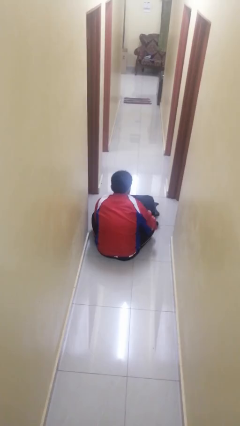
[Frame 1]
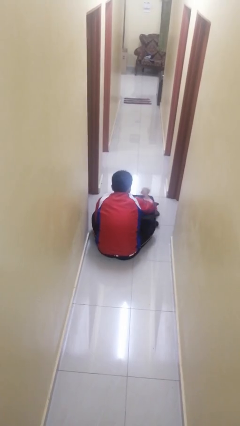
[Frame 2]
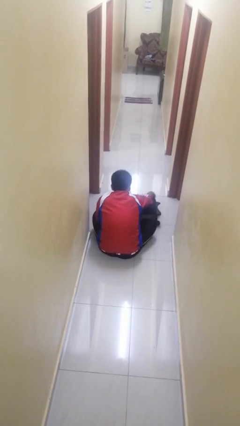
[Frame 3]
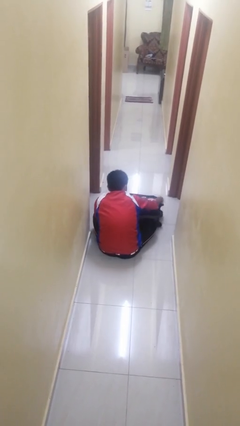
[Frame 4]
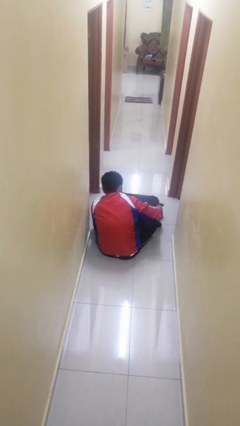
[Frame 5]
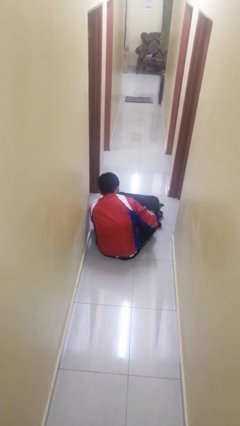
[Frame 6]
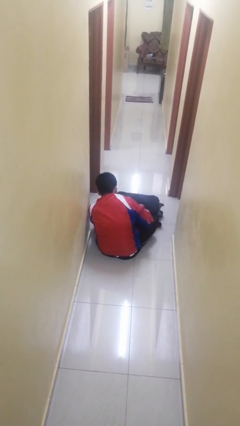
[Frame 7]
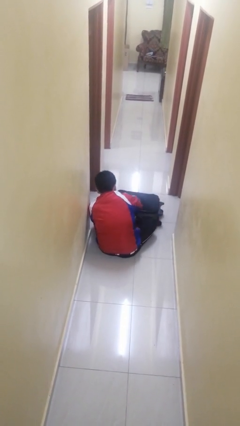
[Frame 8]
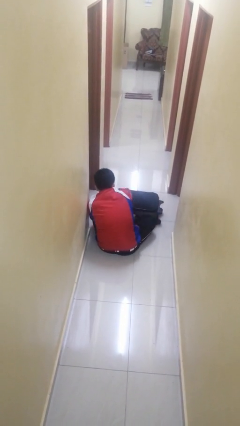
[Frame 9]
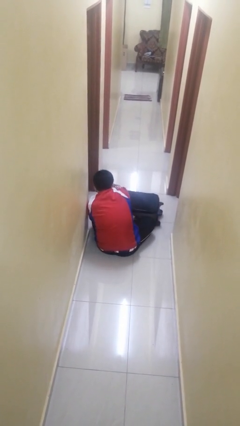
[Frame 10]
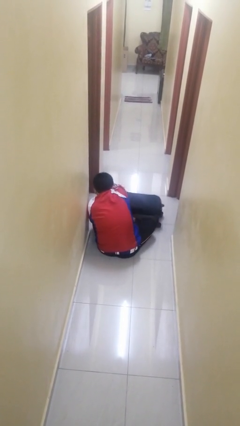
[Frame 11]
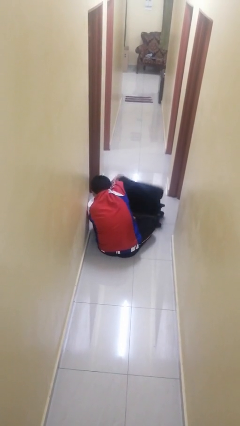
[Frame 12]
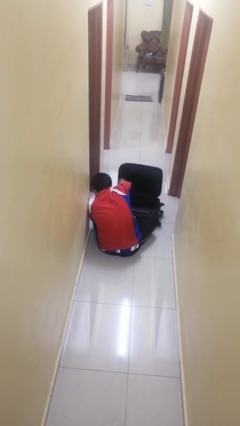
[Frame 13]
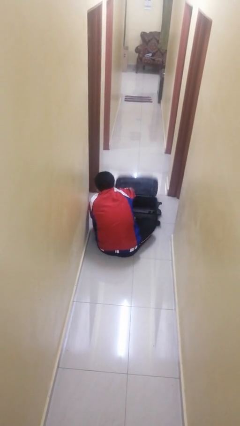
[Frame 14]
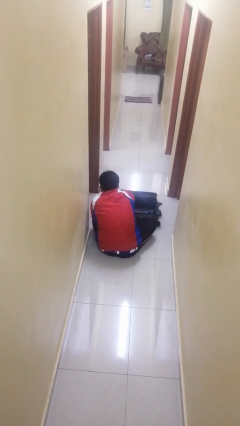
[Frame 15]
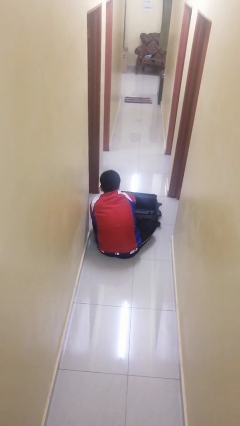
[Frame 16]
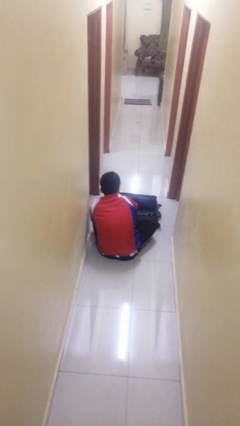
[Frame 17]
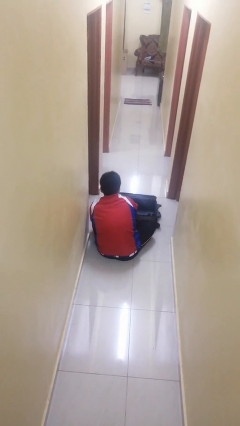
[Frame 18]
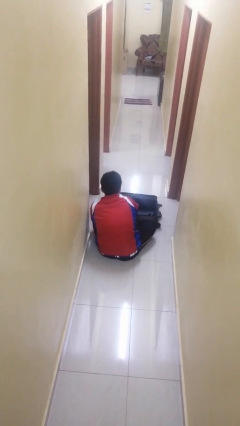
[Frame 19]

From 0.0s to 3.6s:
person opens suitcase

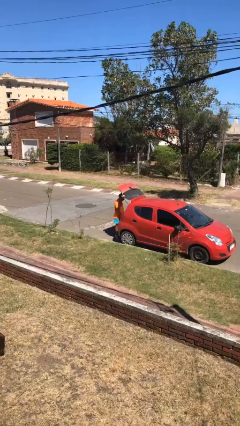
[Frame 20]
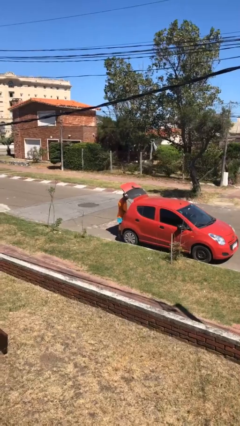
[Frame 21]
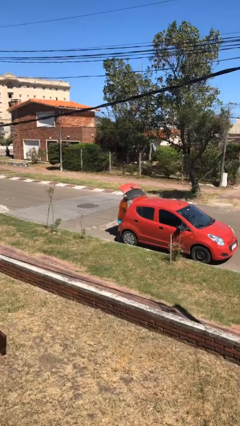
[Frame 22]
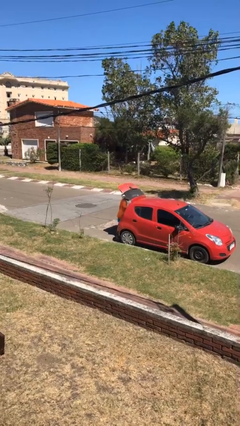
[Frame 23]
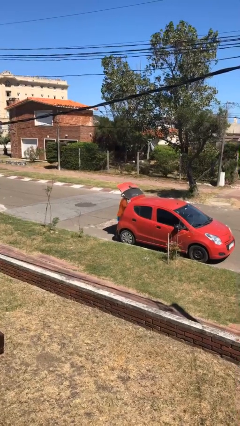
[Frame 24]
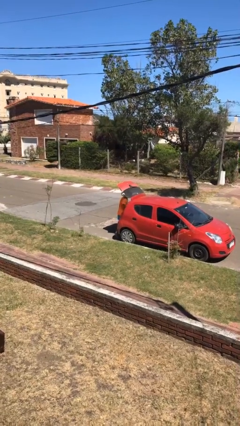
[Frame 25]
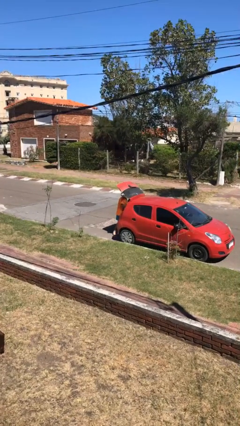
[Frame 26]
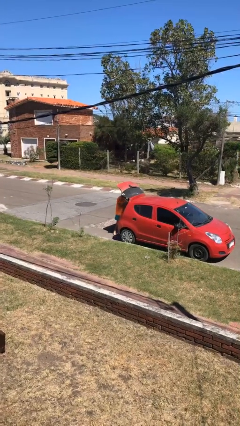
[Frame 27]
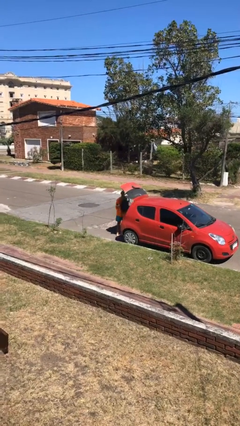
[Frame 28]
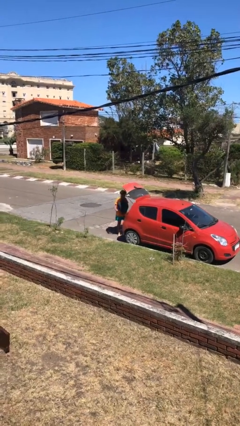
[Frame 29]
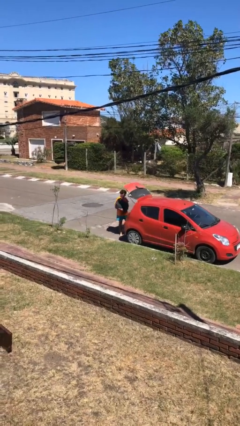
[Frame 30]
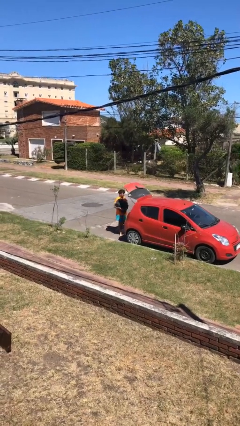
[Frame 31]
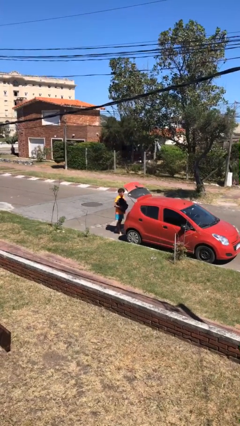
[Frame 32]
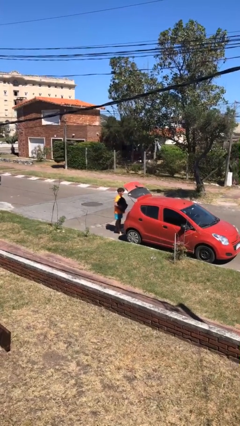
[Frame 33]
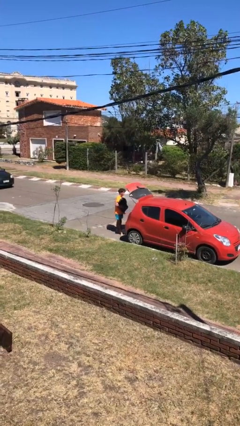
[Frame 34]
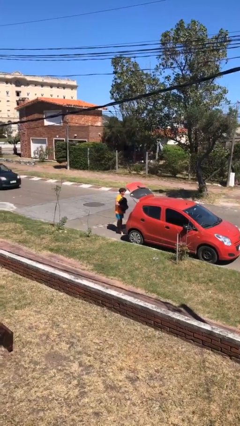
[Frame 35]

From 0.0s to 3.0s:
person unloads car

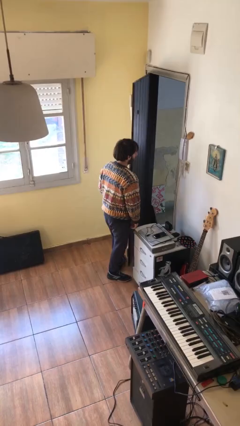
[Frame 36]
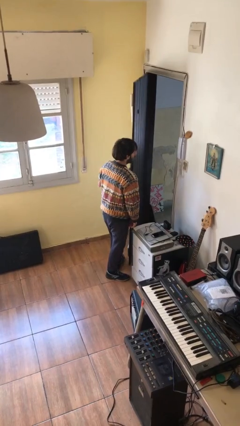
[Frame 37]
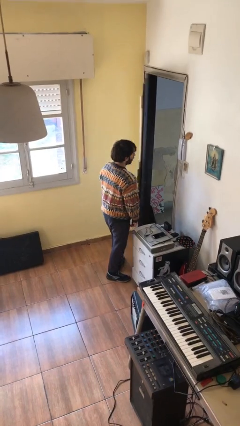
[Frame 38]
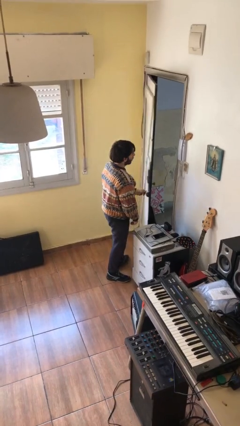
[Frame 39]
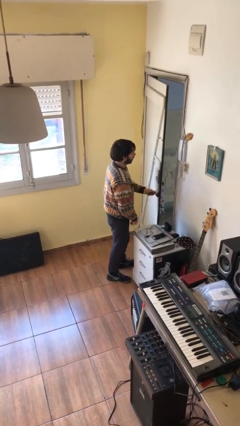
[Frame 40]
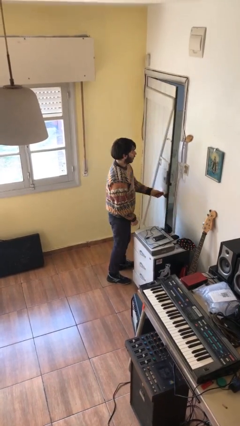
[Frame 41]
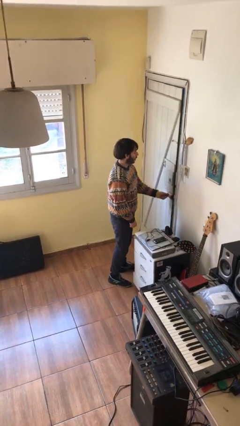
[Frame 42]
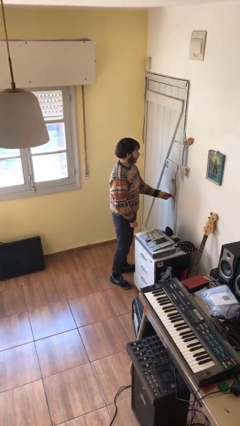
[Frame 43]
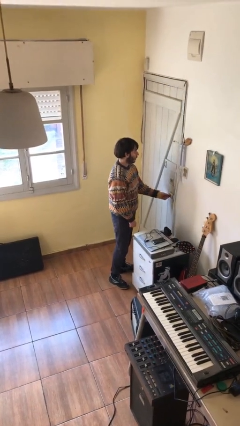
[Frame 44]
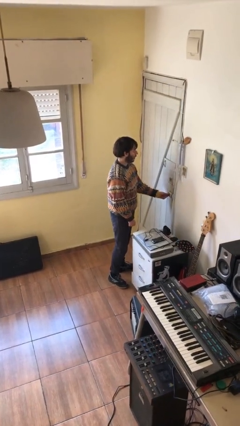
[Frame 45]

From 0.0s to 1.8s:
person closes facility door

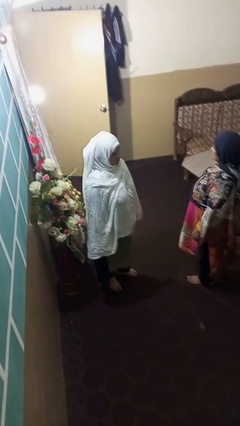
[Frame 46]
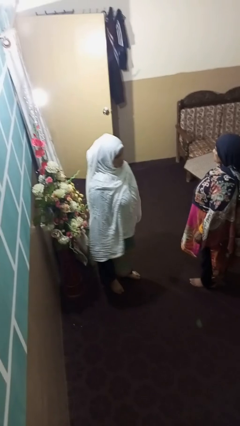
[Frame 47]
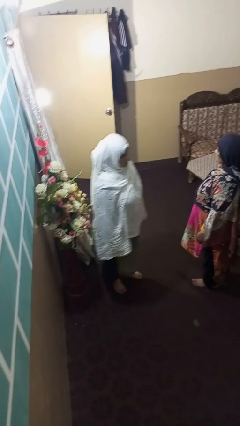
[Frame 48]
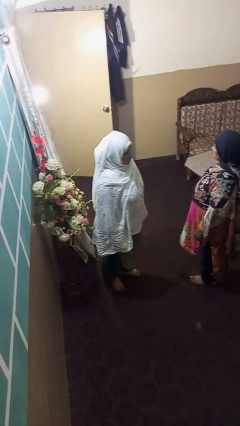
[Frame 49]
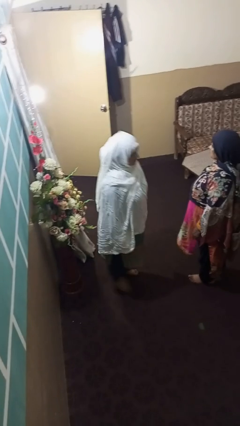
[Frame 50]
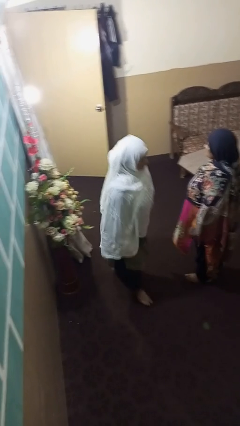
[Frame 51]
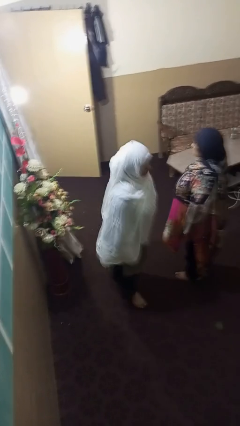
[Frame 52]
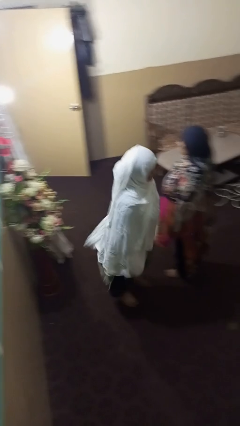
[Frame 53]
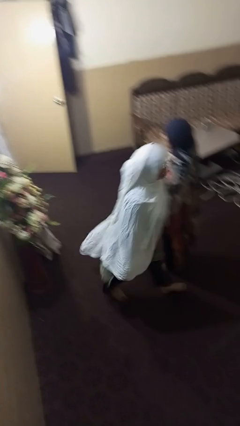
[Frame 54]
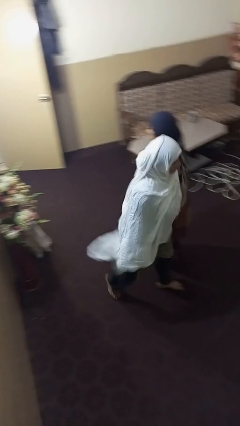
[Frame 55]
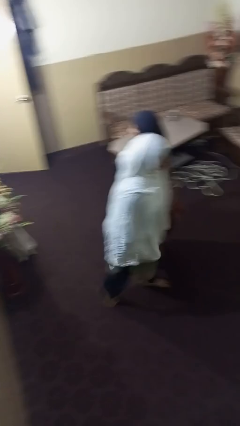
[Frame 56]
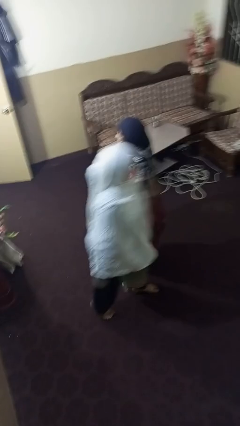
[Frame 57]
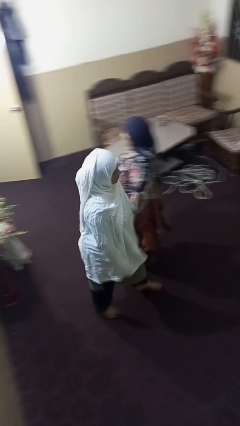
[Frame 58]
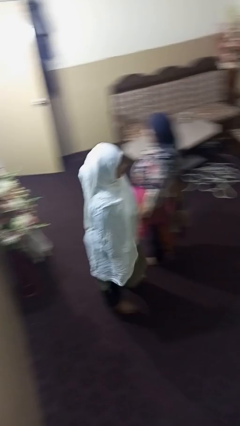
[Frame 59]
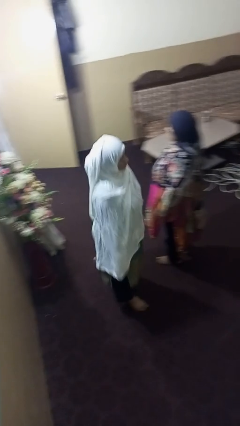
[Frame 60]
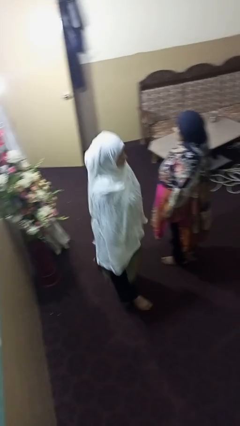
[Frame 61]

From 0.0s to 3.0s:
person shoves person

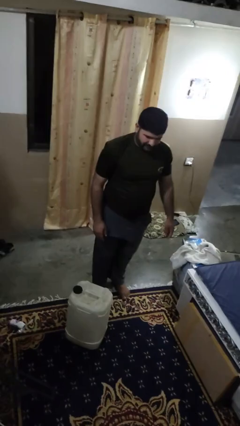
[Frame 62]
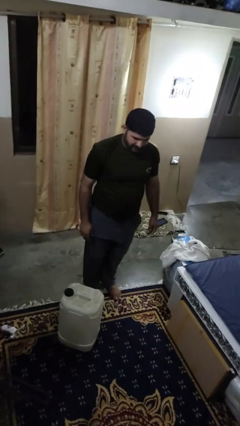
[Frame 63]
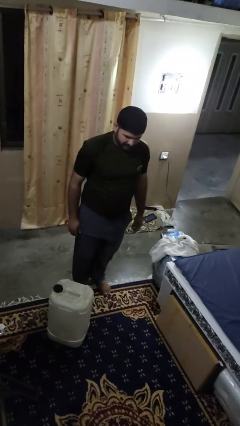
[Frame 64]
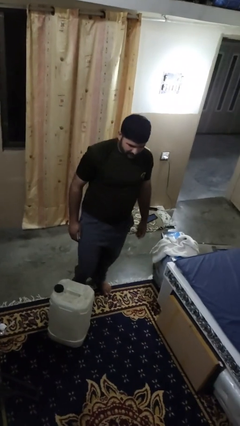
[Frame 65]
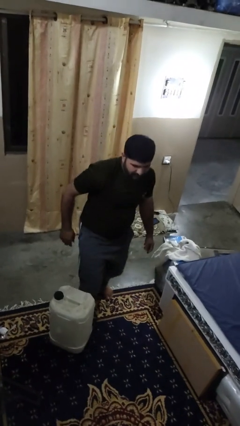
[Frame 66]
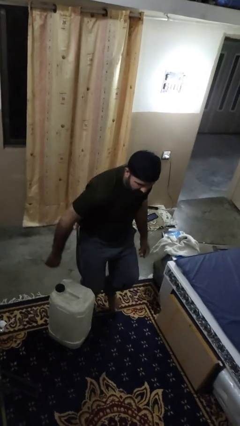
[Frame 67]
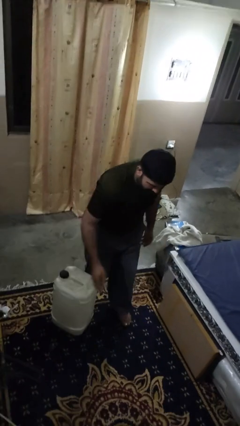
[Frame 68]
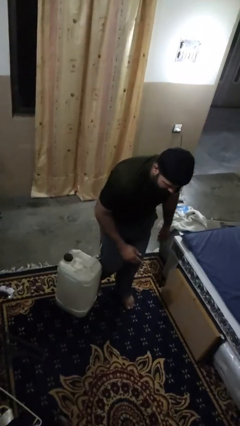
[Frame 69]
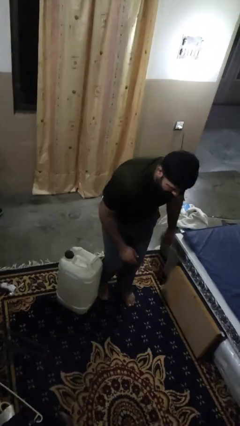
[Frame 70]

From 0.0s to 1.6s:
person trips on object on floor

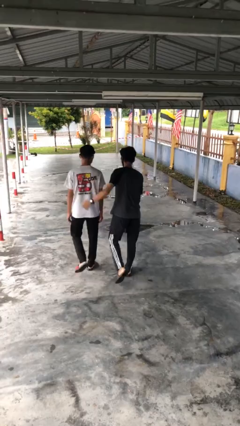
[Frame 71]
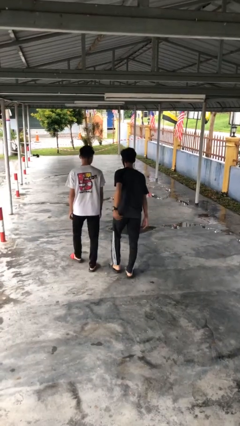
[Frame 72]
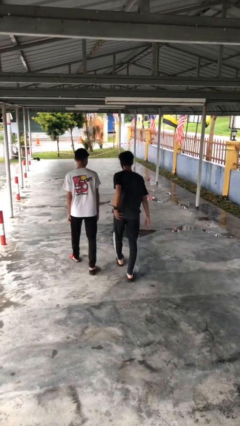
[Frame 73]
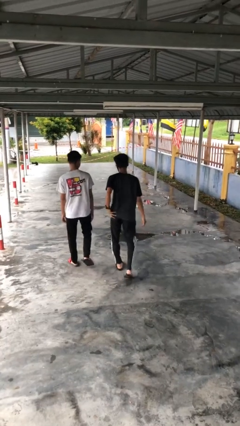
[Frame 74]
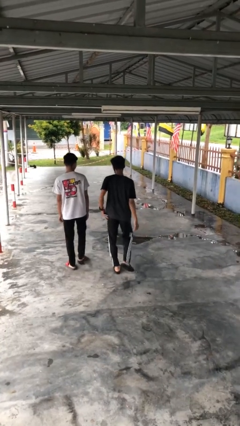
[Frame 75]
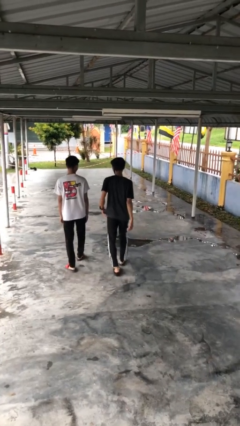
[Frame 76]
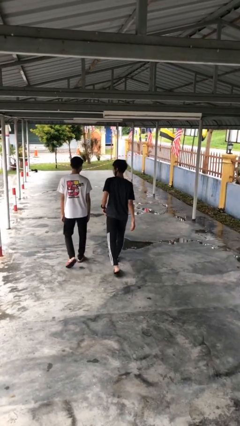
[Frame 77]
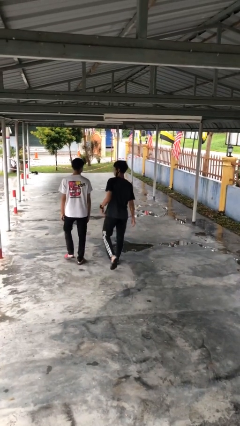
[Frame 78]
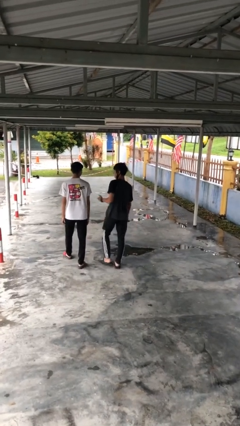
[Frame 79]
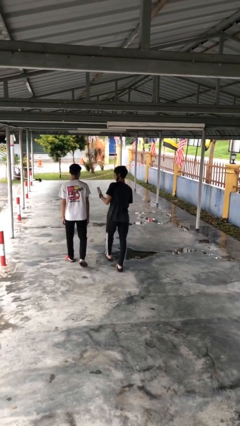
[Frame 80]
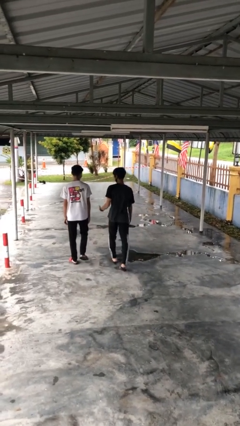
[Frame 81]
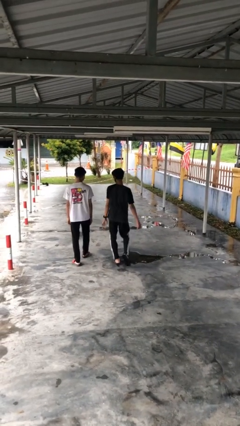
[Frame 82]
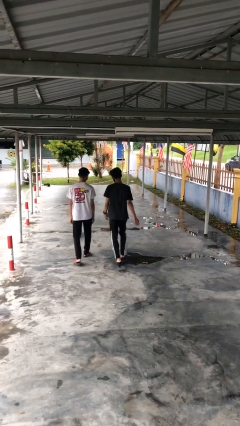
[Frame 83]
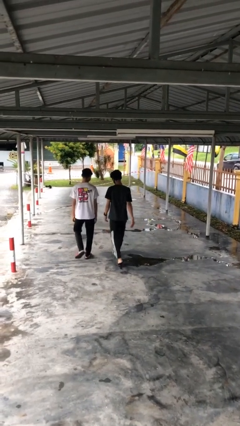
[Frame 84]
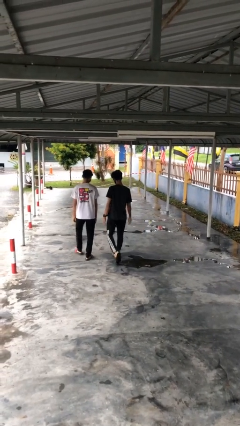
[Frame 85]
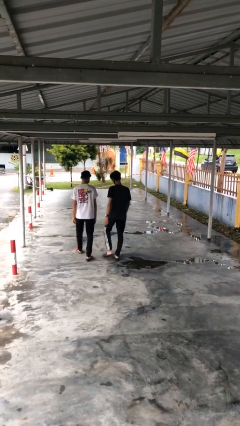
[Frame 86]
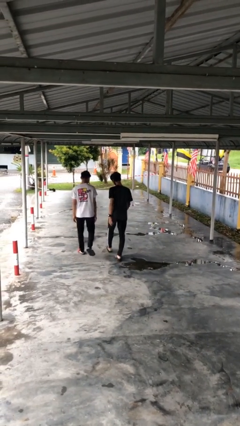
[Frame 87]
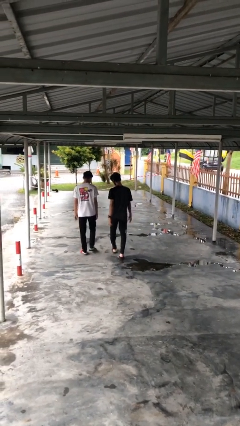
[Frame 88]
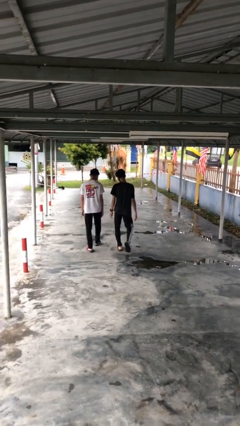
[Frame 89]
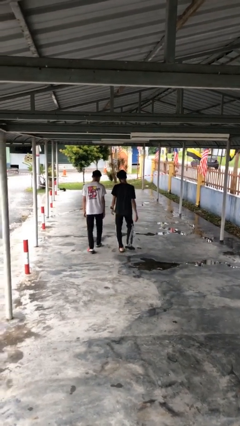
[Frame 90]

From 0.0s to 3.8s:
person talks to person

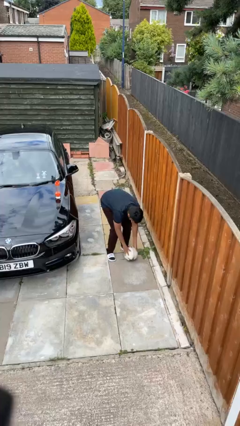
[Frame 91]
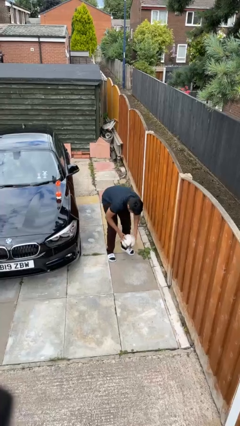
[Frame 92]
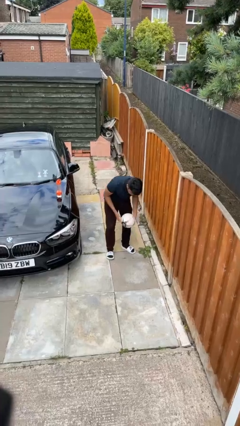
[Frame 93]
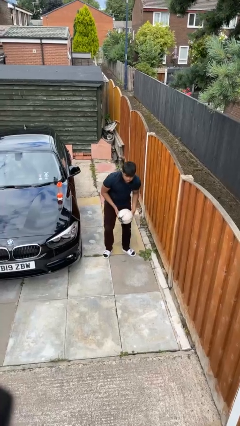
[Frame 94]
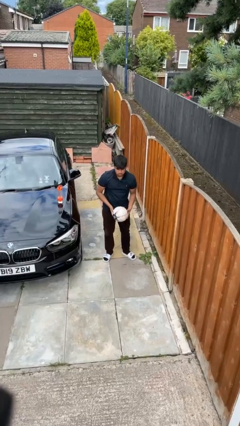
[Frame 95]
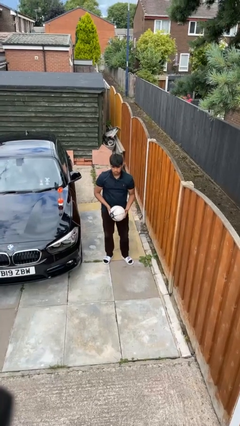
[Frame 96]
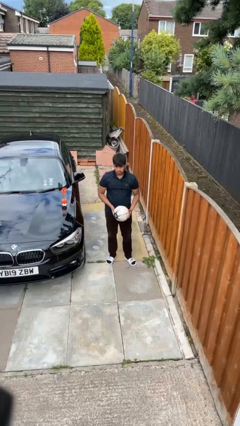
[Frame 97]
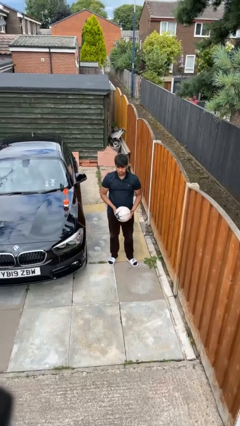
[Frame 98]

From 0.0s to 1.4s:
person picks up object from floor
